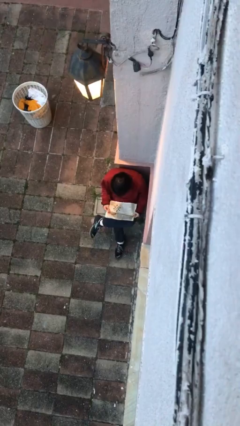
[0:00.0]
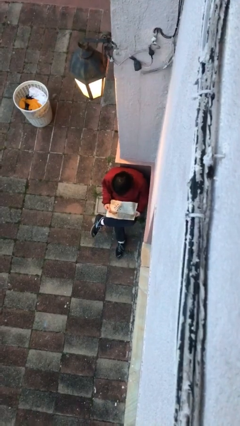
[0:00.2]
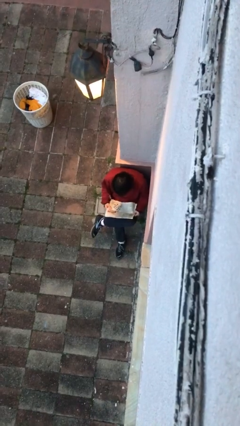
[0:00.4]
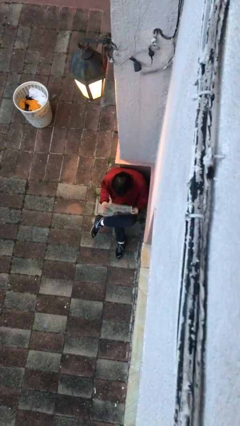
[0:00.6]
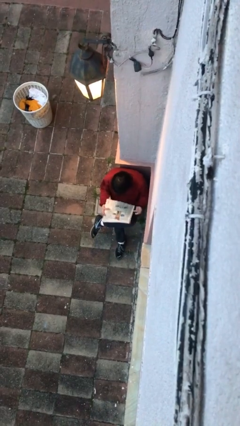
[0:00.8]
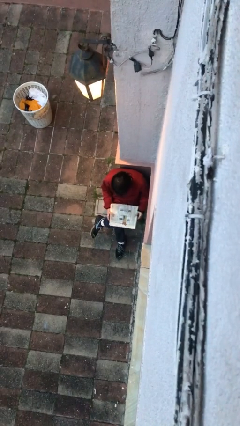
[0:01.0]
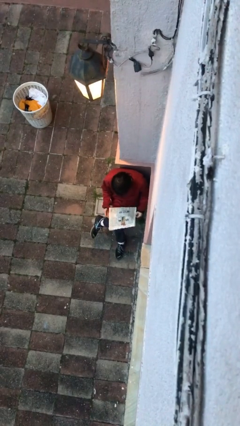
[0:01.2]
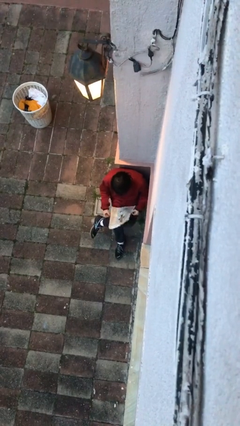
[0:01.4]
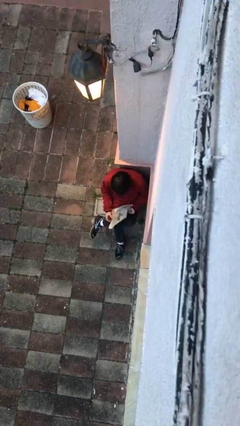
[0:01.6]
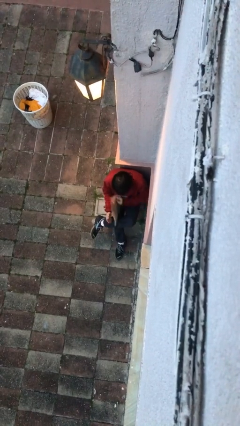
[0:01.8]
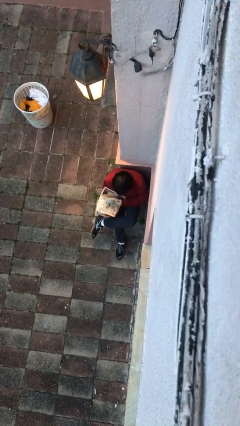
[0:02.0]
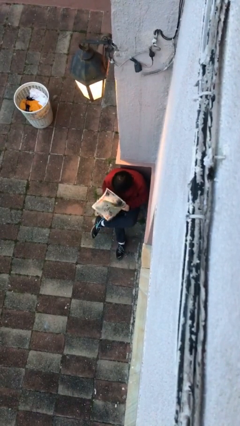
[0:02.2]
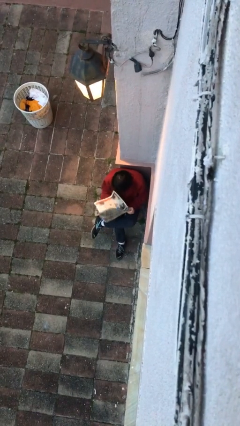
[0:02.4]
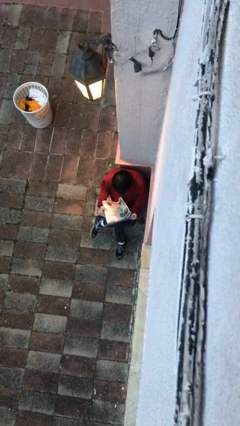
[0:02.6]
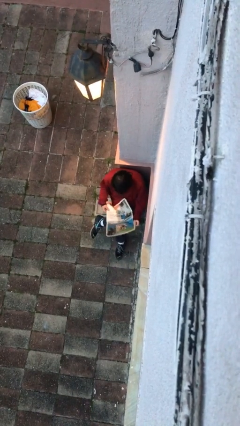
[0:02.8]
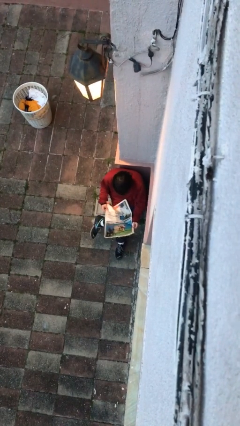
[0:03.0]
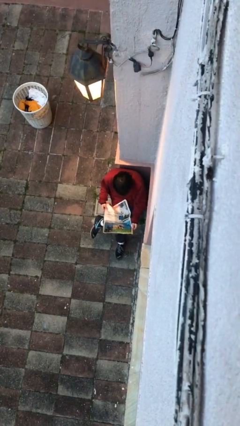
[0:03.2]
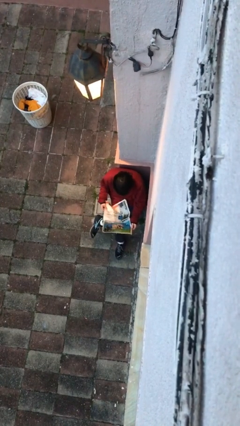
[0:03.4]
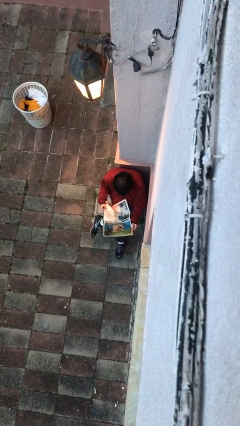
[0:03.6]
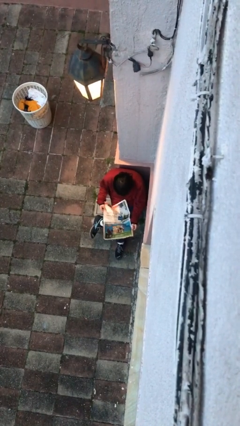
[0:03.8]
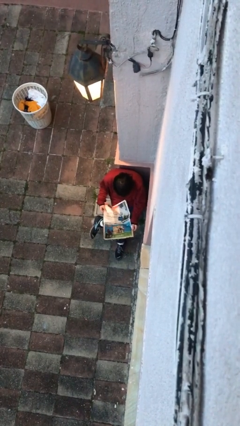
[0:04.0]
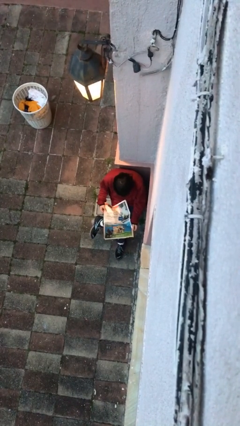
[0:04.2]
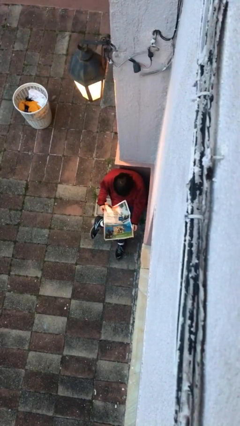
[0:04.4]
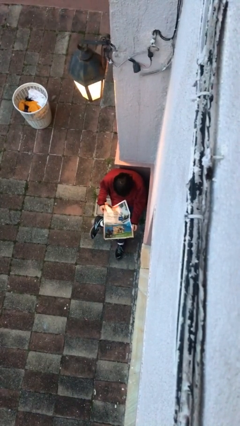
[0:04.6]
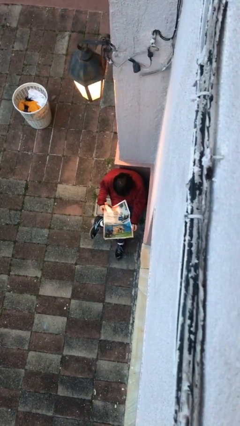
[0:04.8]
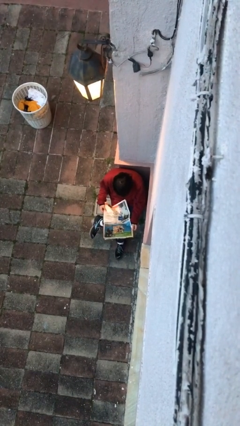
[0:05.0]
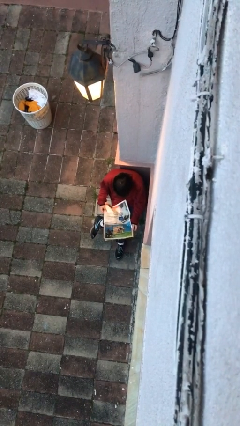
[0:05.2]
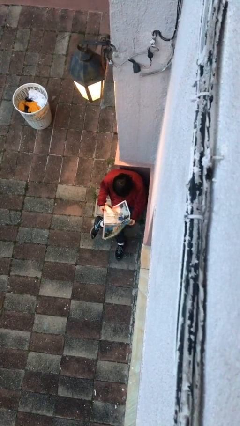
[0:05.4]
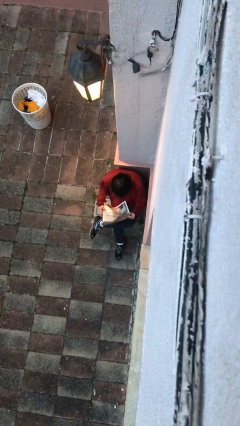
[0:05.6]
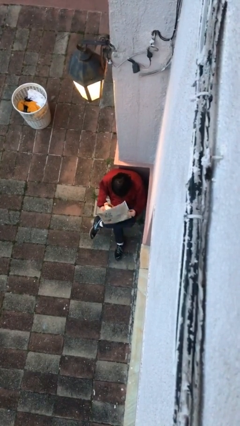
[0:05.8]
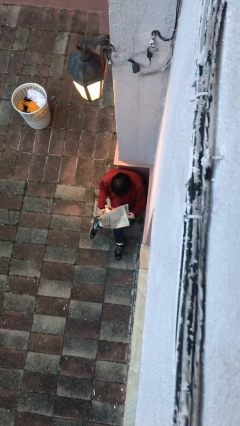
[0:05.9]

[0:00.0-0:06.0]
person reads newspaper

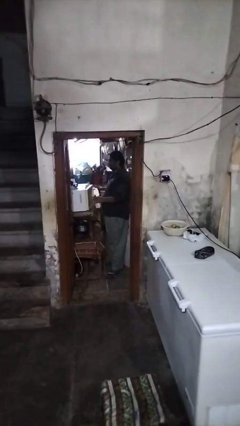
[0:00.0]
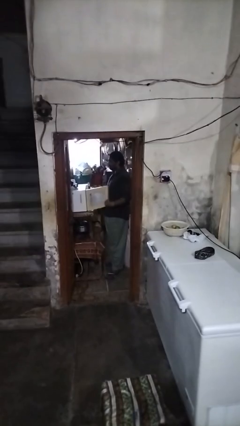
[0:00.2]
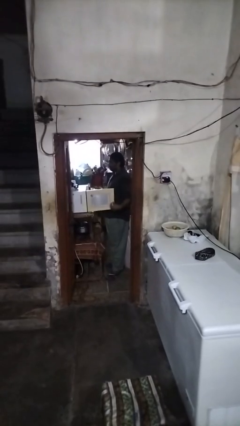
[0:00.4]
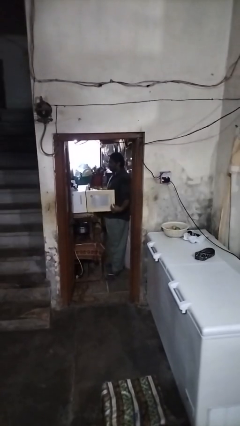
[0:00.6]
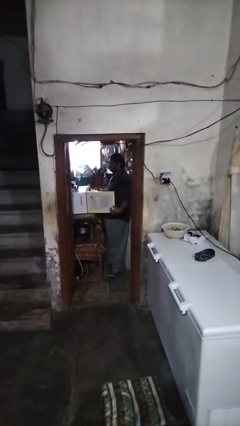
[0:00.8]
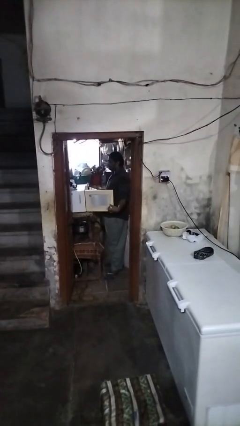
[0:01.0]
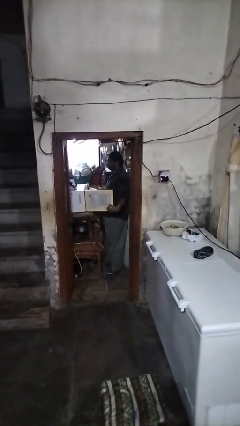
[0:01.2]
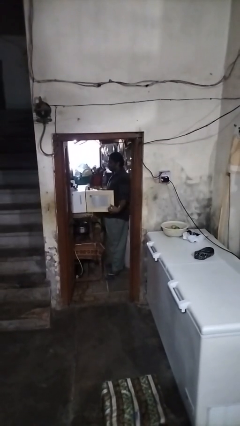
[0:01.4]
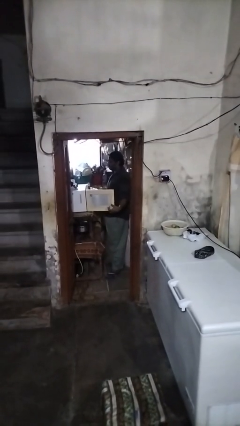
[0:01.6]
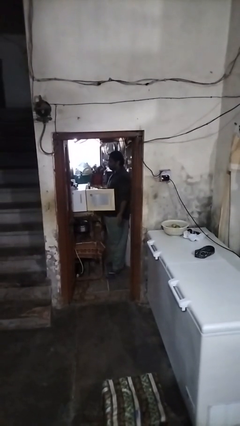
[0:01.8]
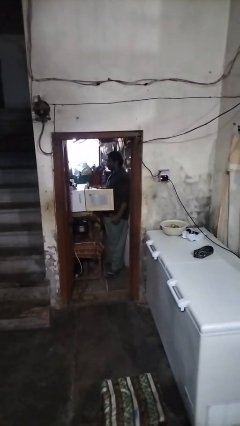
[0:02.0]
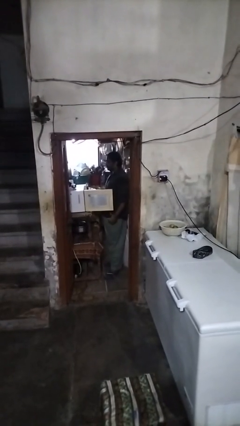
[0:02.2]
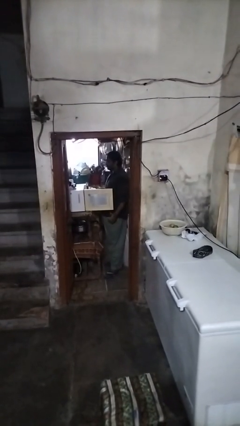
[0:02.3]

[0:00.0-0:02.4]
person opens oven door

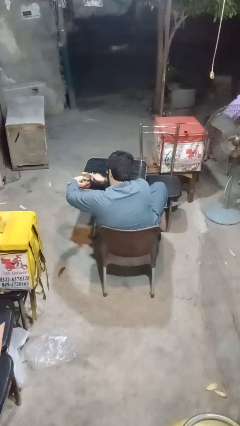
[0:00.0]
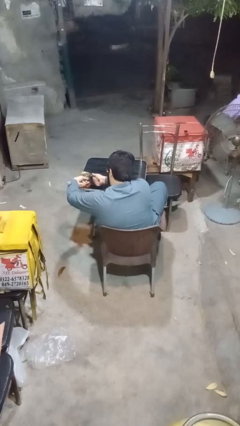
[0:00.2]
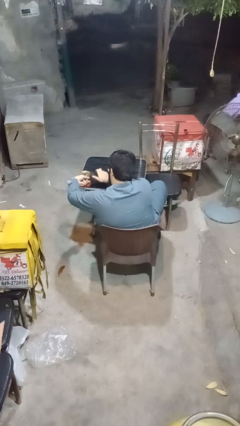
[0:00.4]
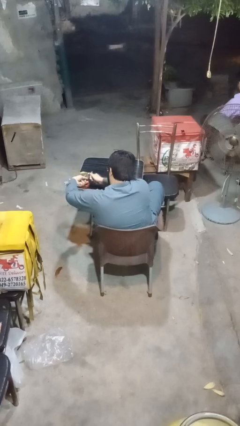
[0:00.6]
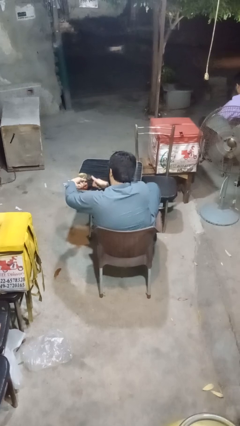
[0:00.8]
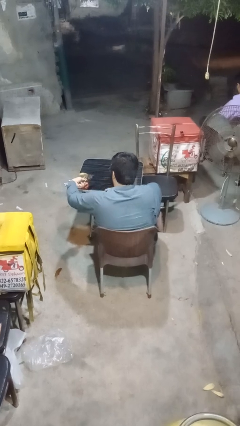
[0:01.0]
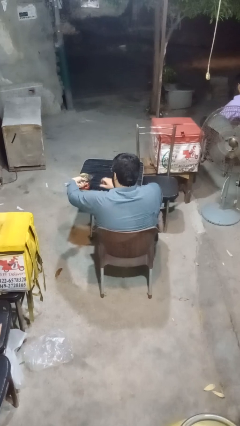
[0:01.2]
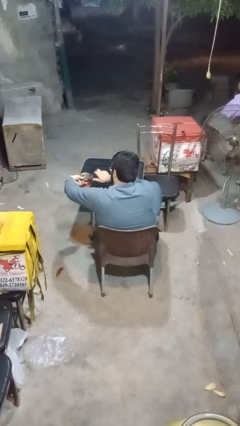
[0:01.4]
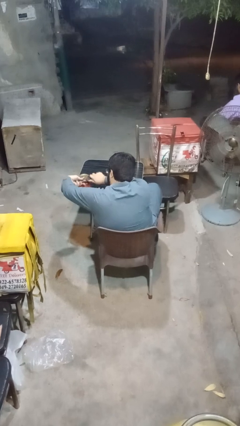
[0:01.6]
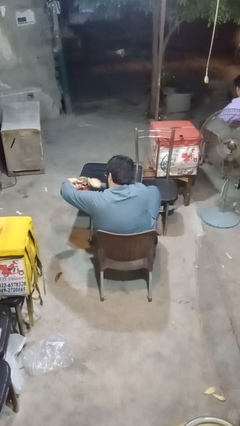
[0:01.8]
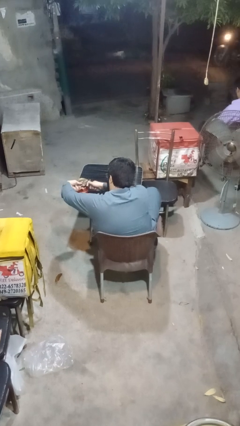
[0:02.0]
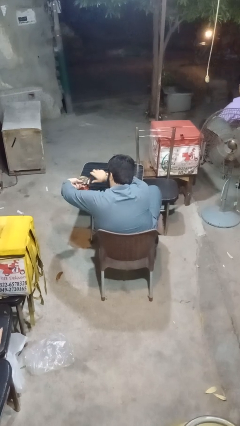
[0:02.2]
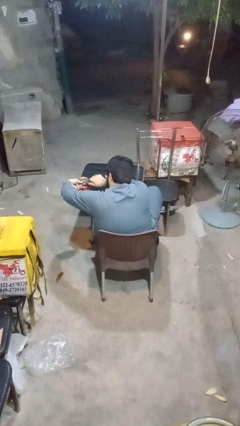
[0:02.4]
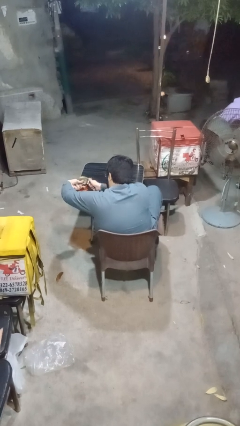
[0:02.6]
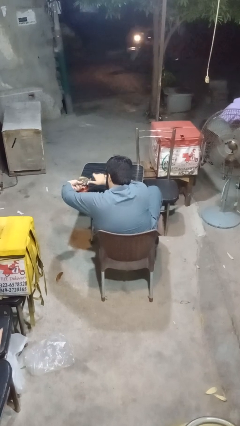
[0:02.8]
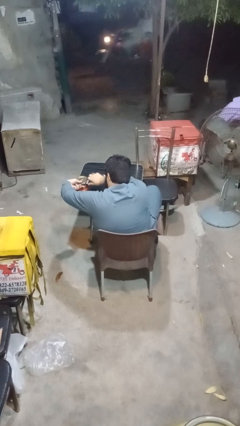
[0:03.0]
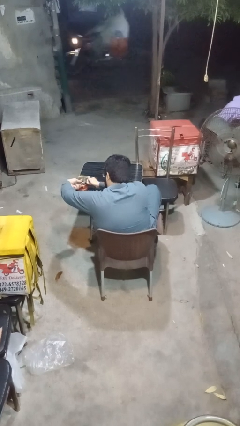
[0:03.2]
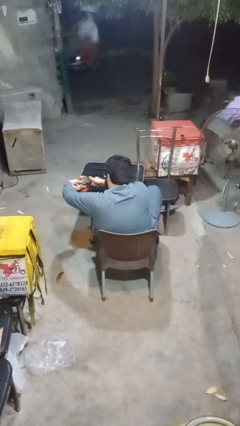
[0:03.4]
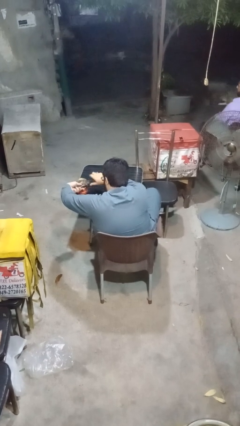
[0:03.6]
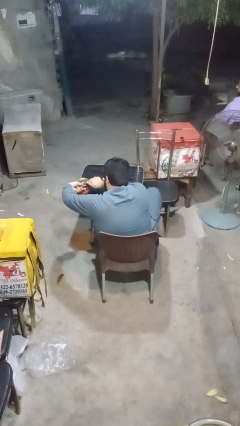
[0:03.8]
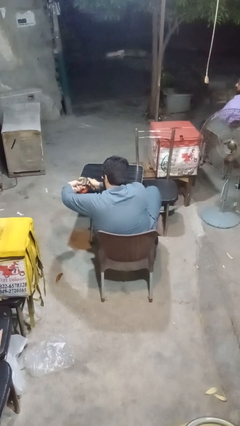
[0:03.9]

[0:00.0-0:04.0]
person opens can with can opener

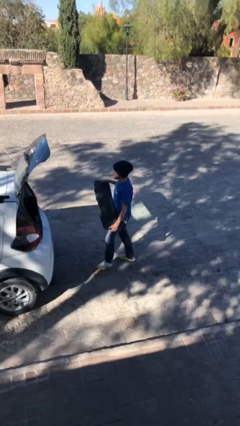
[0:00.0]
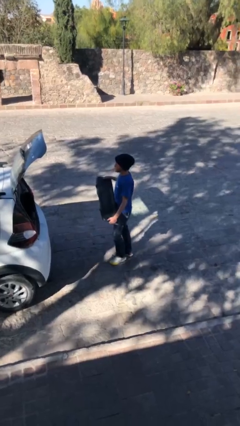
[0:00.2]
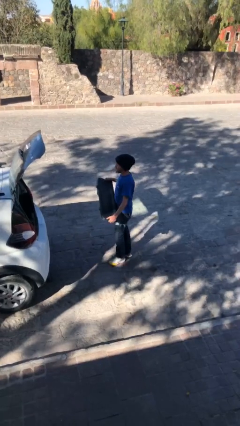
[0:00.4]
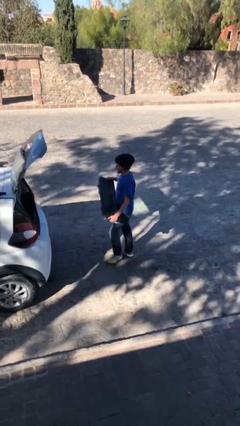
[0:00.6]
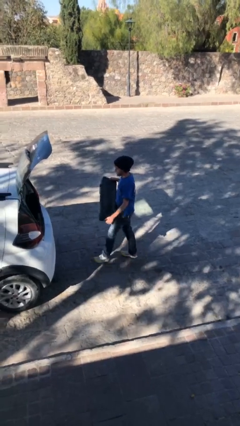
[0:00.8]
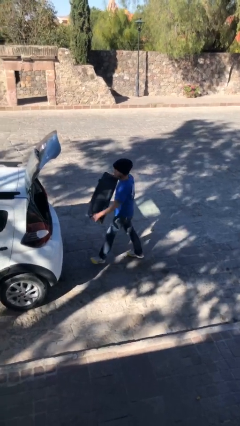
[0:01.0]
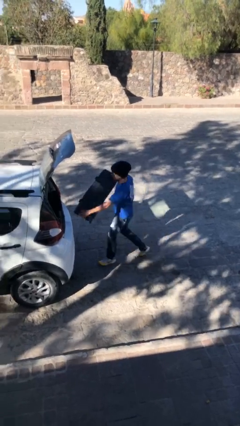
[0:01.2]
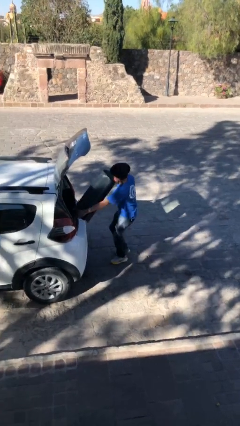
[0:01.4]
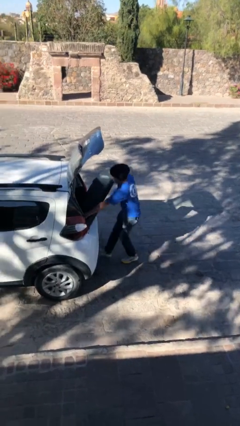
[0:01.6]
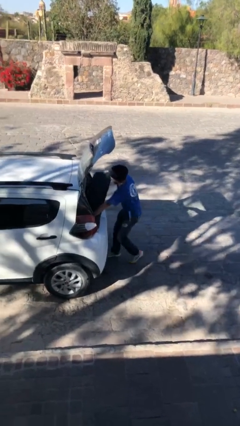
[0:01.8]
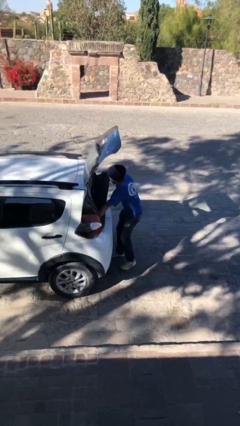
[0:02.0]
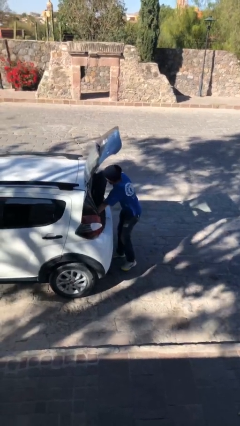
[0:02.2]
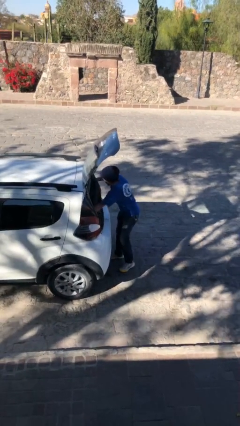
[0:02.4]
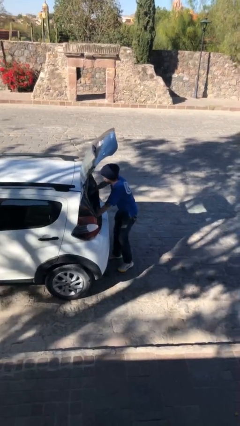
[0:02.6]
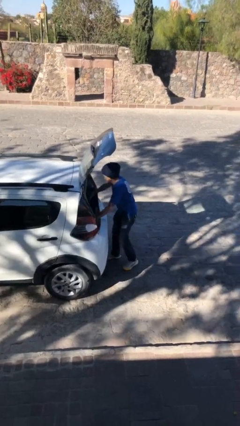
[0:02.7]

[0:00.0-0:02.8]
person loads car

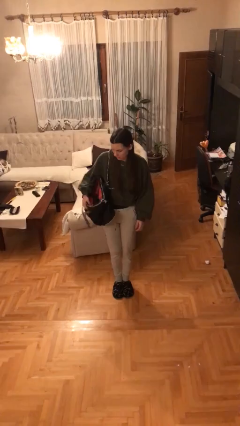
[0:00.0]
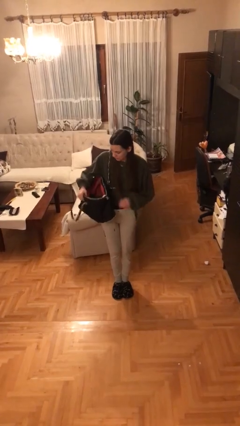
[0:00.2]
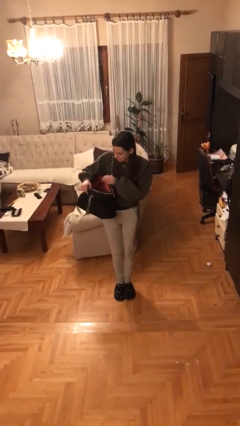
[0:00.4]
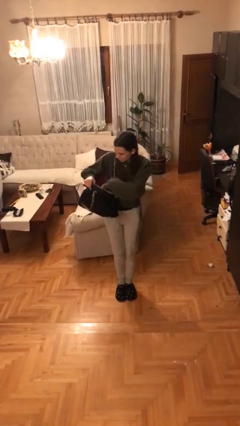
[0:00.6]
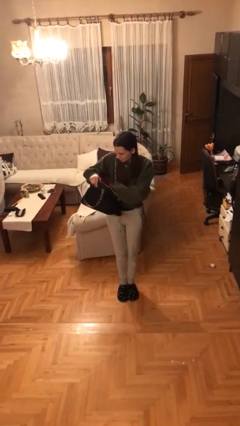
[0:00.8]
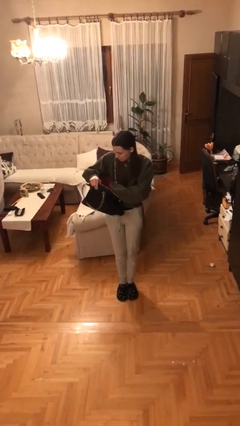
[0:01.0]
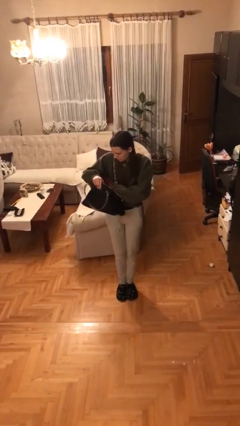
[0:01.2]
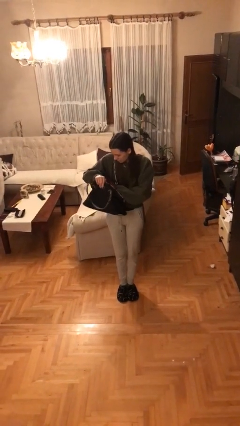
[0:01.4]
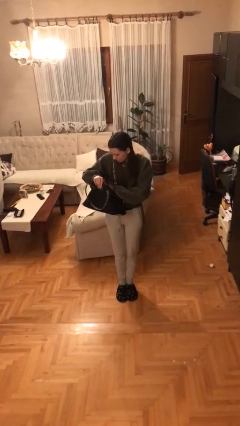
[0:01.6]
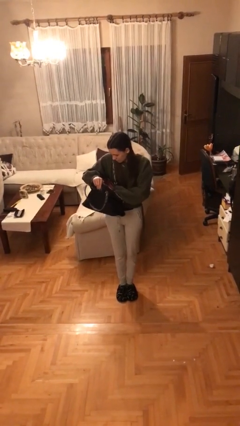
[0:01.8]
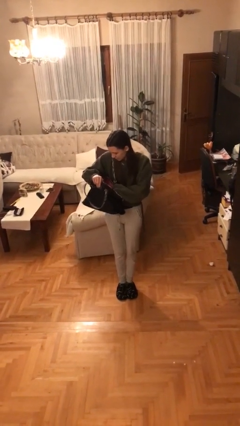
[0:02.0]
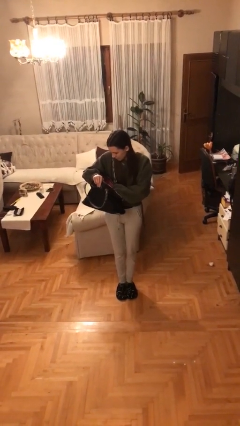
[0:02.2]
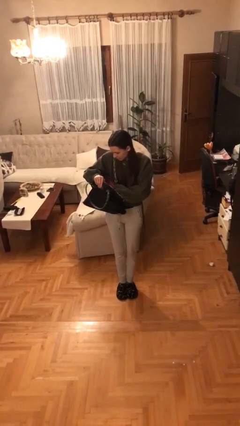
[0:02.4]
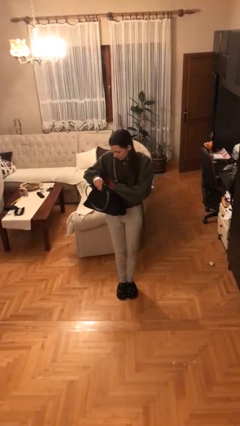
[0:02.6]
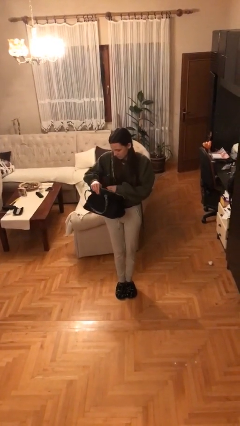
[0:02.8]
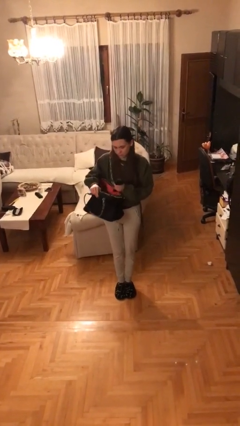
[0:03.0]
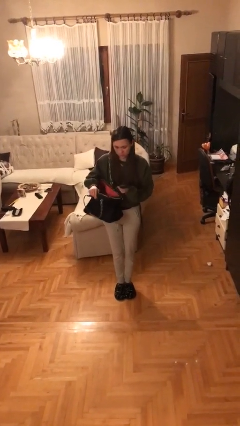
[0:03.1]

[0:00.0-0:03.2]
person searches in purse
